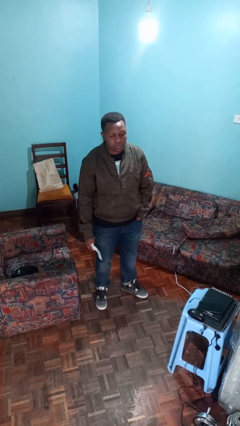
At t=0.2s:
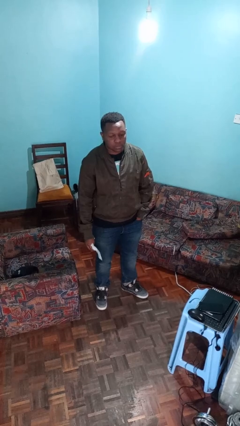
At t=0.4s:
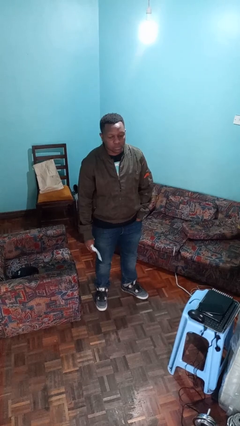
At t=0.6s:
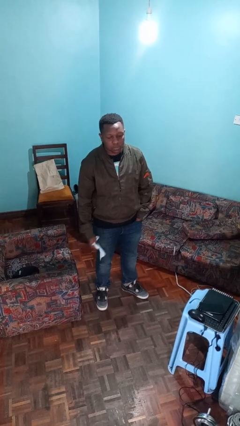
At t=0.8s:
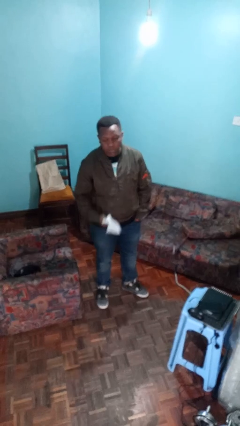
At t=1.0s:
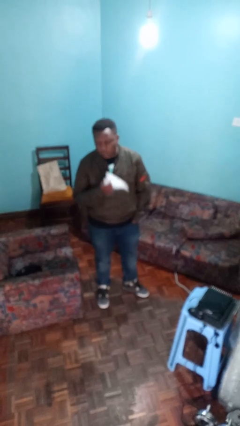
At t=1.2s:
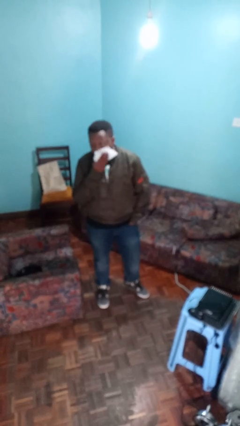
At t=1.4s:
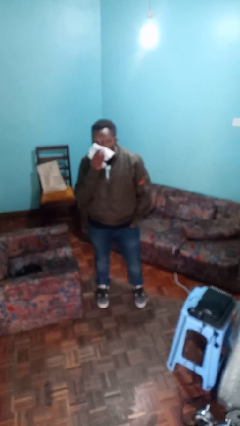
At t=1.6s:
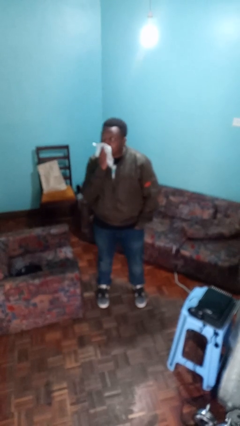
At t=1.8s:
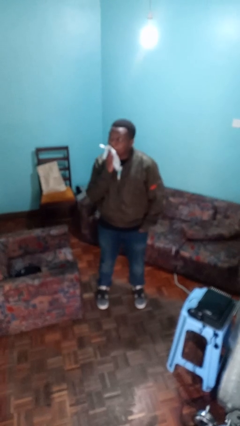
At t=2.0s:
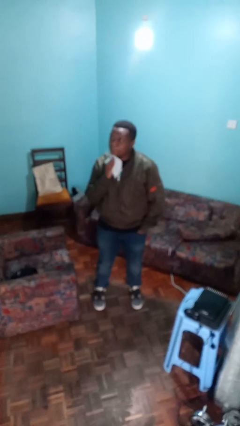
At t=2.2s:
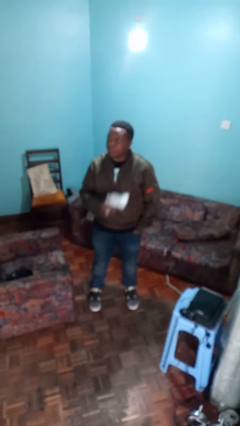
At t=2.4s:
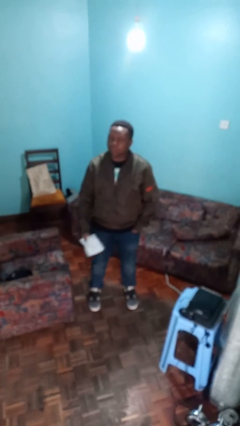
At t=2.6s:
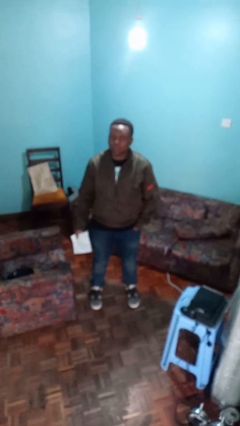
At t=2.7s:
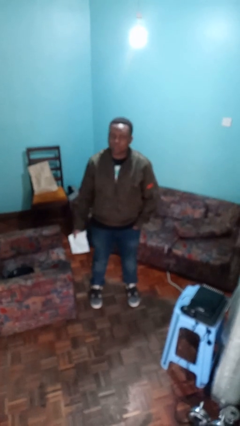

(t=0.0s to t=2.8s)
person wipes mouth with napkin

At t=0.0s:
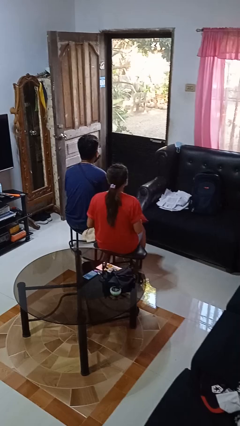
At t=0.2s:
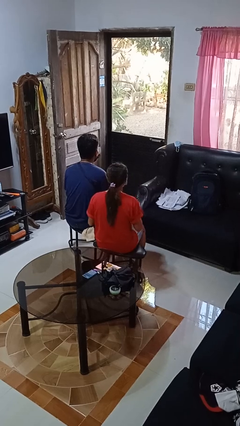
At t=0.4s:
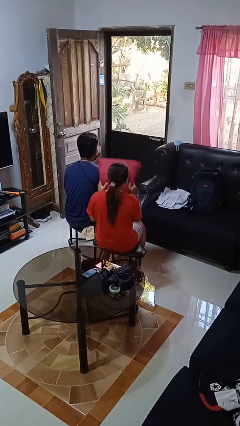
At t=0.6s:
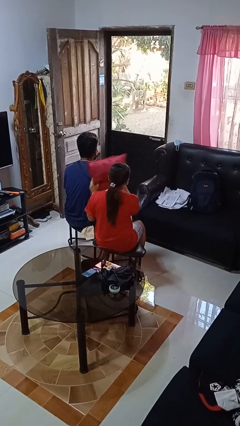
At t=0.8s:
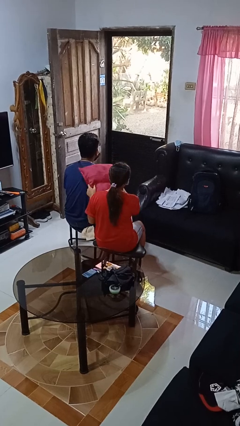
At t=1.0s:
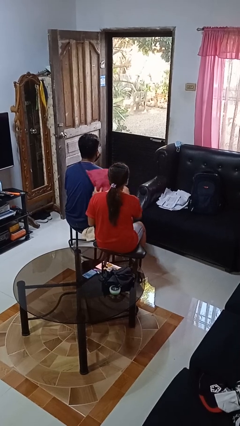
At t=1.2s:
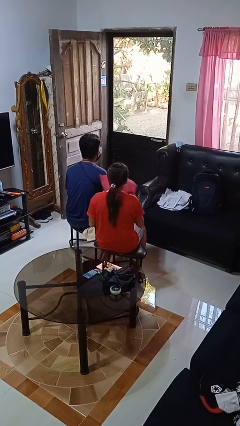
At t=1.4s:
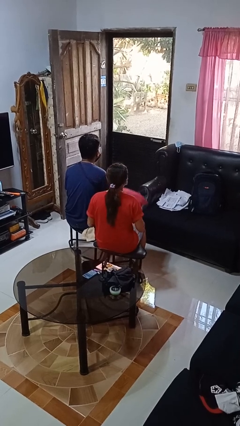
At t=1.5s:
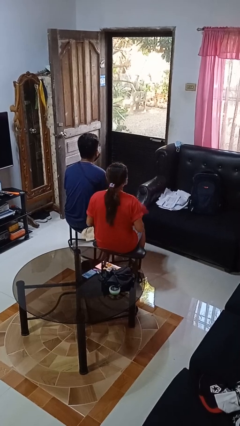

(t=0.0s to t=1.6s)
person hits person with pillow

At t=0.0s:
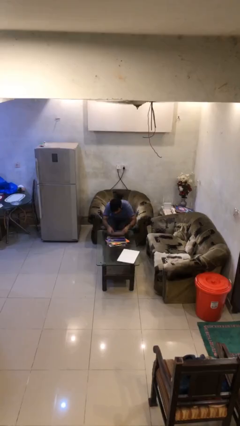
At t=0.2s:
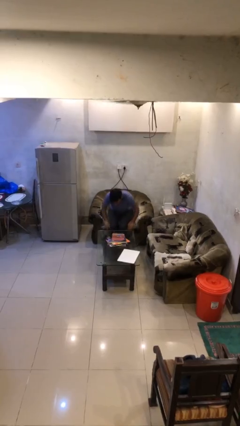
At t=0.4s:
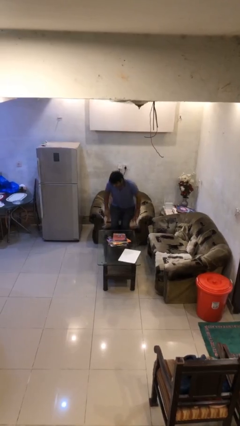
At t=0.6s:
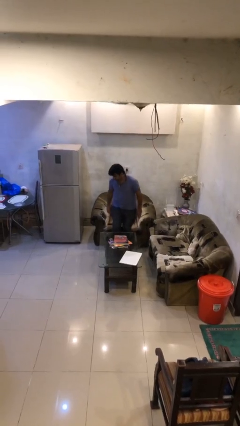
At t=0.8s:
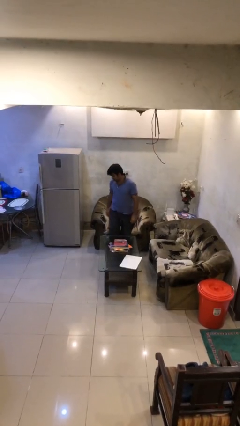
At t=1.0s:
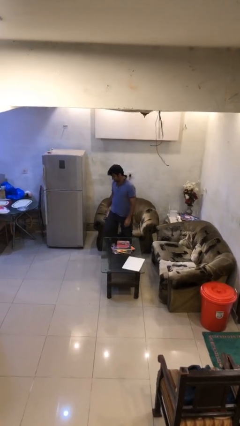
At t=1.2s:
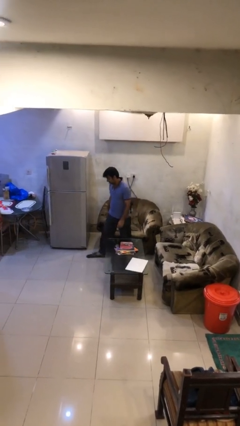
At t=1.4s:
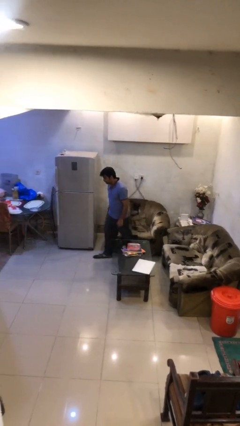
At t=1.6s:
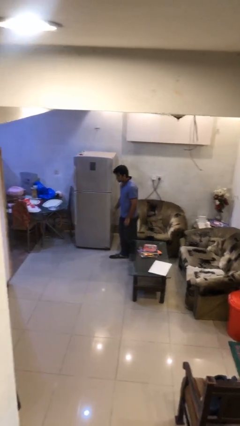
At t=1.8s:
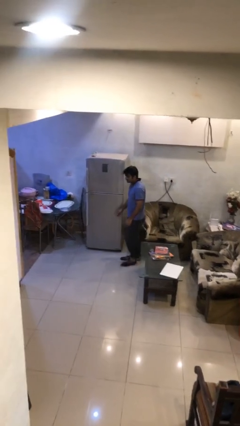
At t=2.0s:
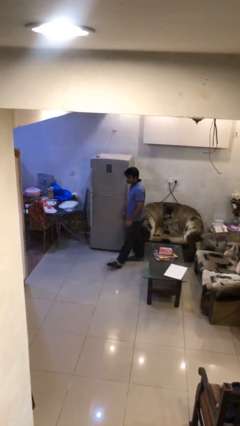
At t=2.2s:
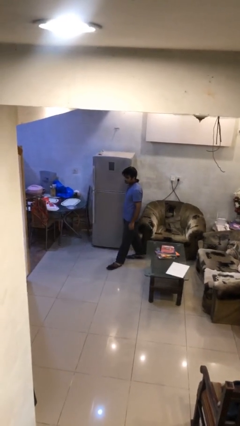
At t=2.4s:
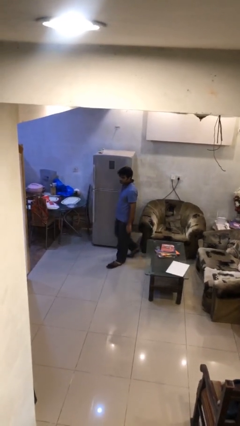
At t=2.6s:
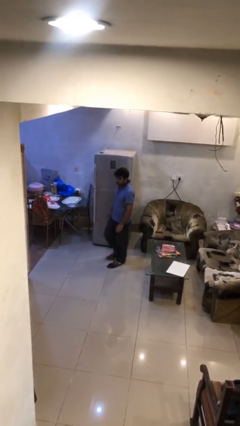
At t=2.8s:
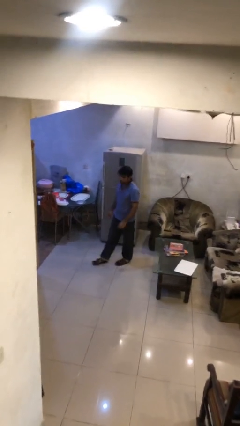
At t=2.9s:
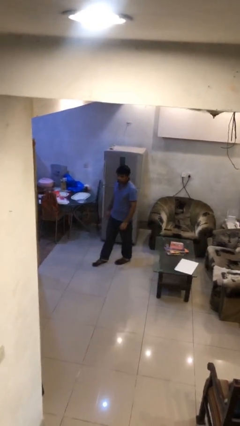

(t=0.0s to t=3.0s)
person stands up

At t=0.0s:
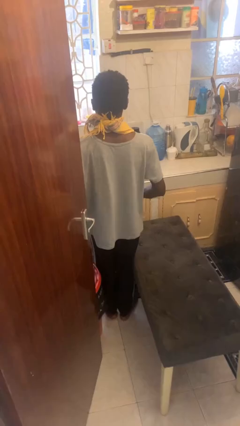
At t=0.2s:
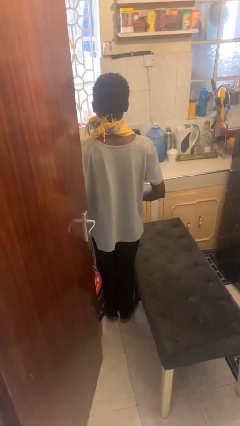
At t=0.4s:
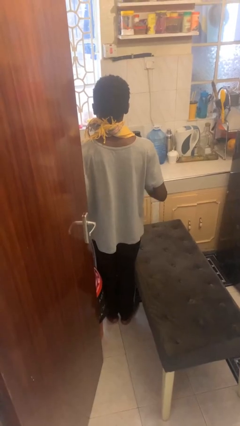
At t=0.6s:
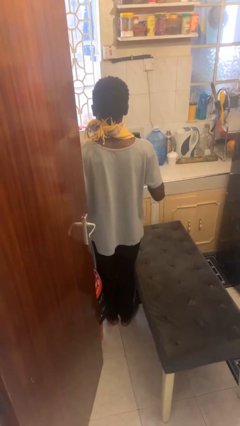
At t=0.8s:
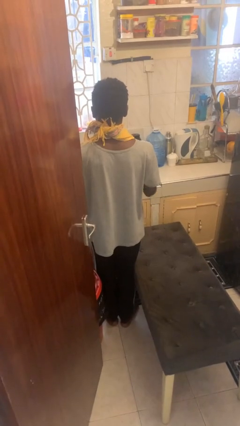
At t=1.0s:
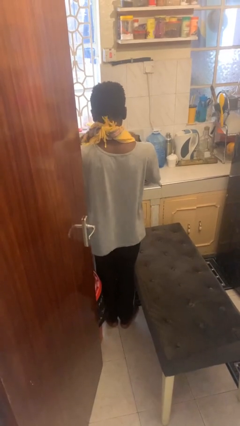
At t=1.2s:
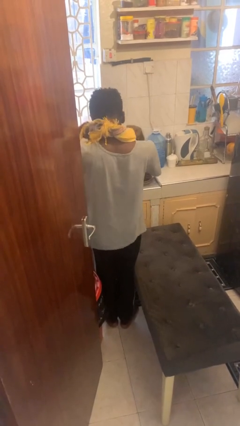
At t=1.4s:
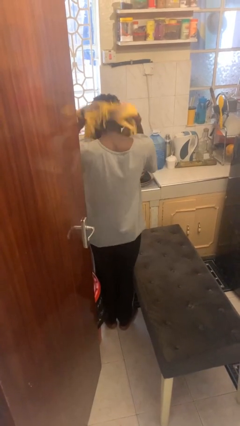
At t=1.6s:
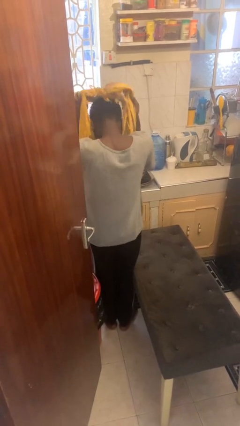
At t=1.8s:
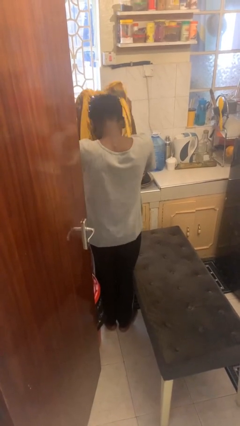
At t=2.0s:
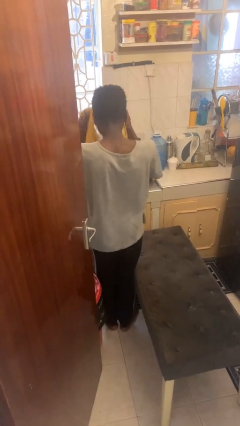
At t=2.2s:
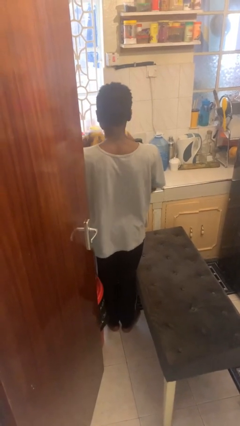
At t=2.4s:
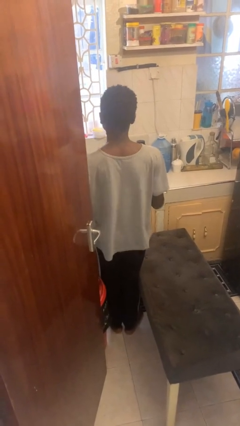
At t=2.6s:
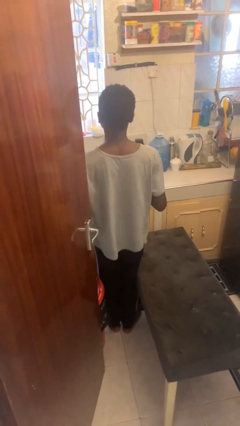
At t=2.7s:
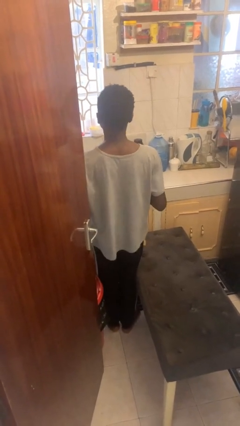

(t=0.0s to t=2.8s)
person takes off apron

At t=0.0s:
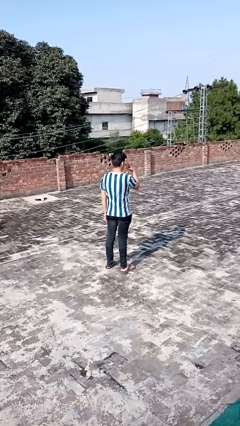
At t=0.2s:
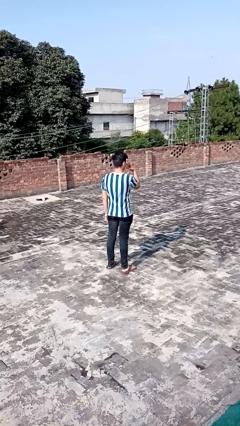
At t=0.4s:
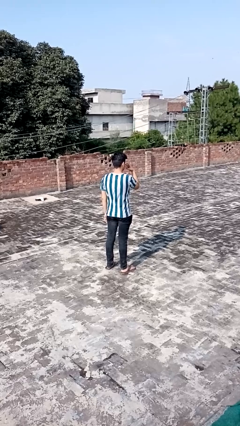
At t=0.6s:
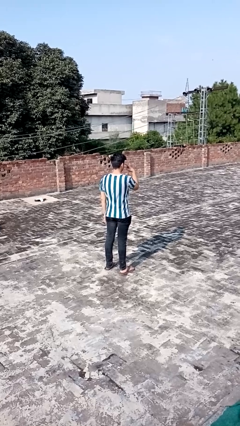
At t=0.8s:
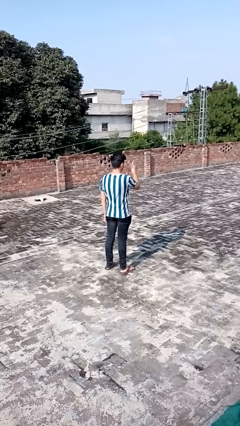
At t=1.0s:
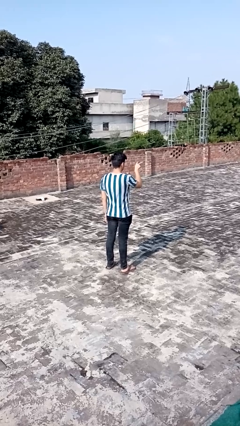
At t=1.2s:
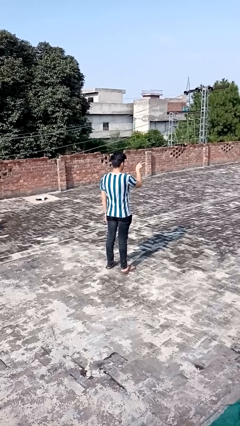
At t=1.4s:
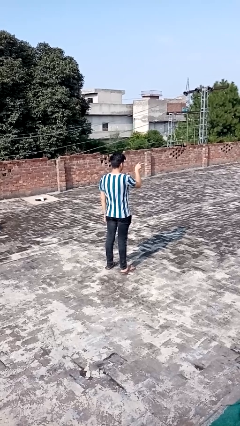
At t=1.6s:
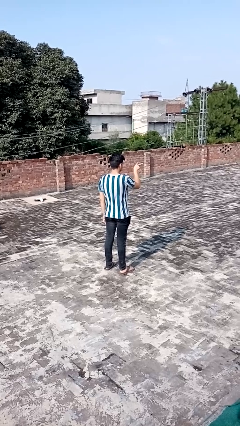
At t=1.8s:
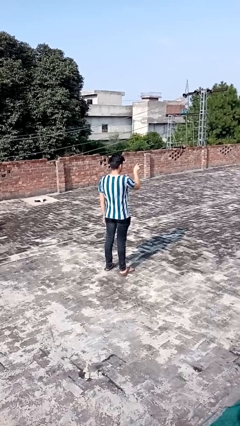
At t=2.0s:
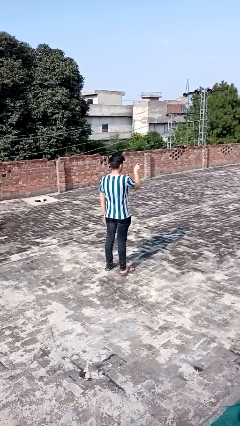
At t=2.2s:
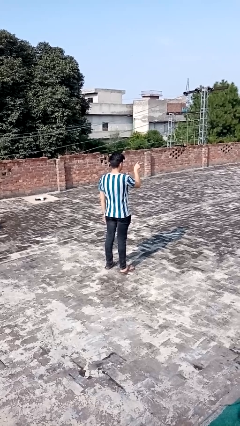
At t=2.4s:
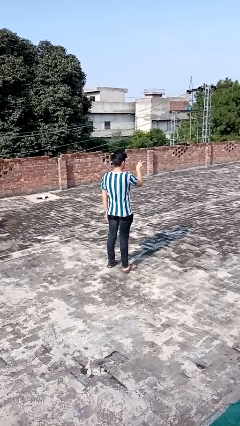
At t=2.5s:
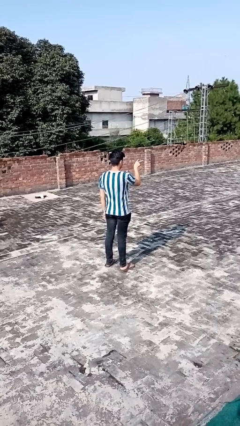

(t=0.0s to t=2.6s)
person gestures watch closely

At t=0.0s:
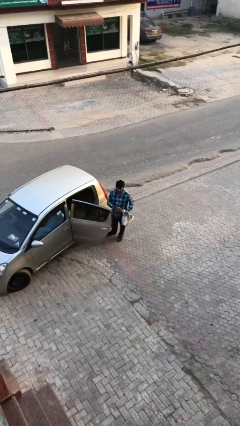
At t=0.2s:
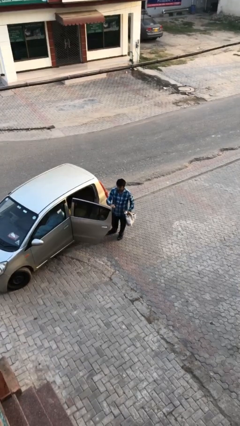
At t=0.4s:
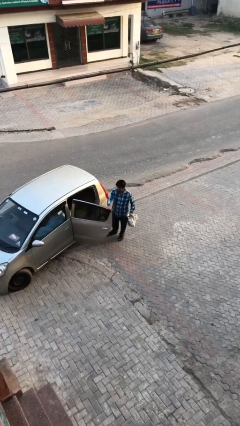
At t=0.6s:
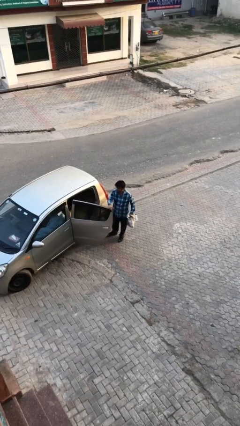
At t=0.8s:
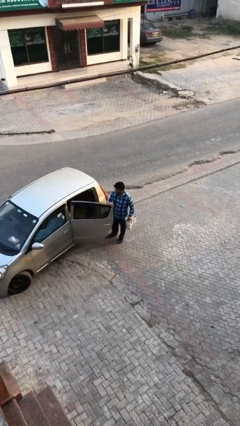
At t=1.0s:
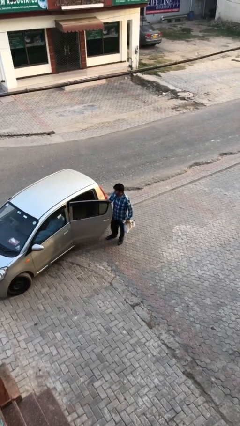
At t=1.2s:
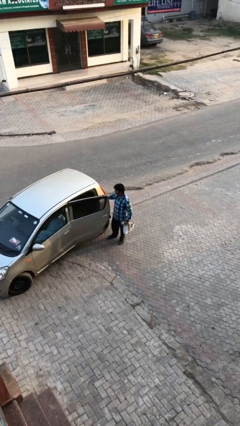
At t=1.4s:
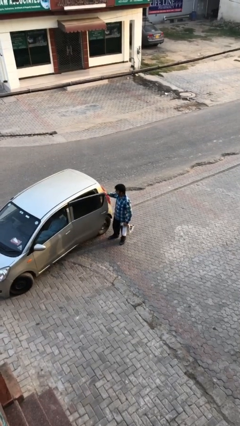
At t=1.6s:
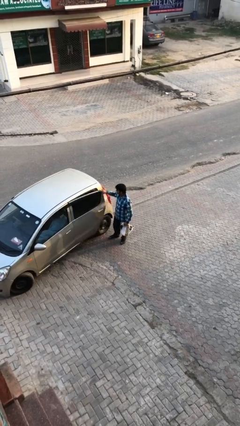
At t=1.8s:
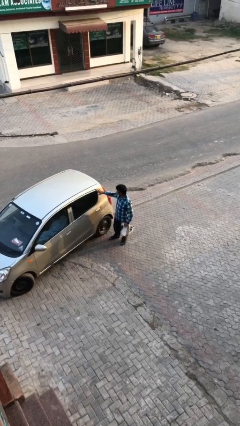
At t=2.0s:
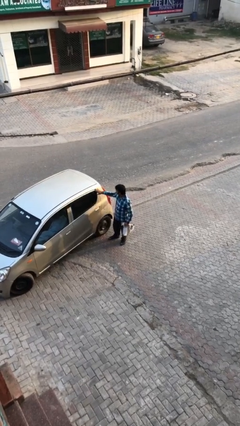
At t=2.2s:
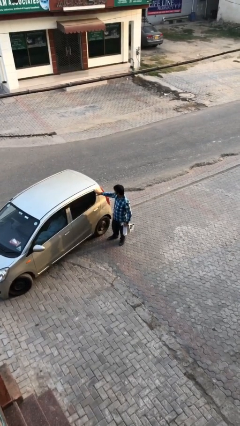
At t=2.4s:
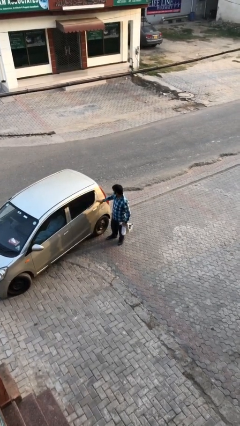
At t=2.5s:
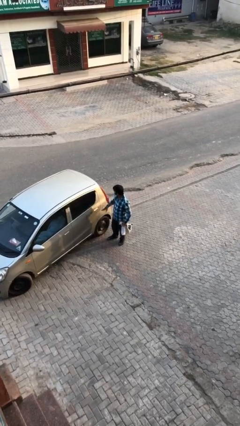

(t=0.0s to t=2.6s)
person closes car door

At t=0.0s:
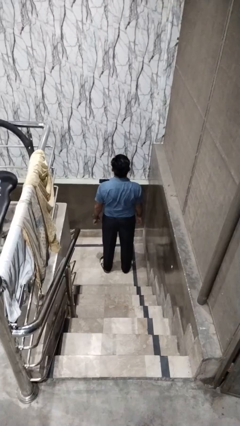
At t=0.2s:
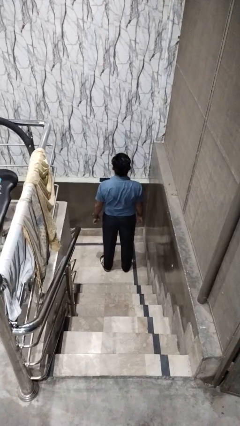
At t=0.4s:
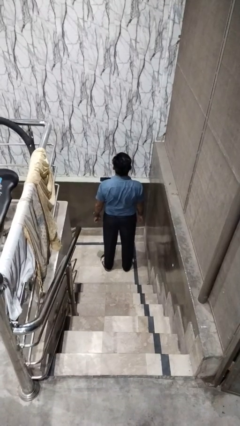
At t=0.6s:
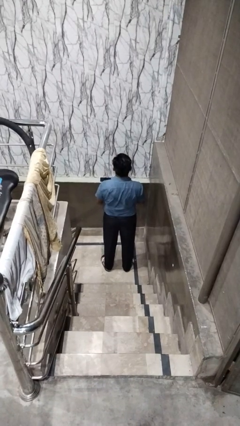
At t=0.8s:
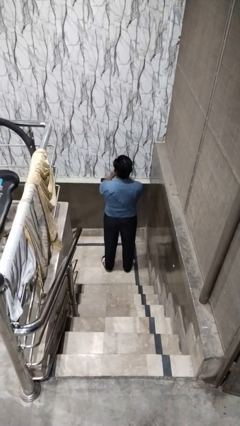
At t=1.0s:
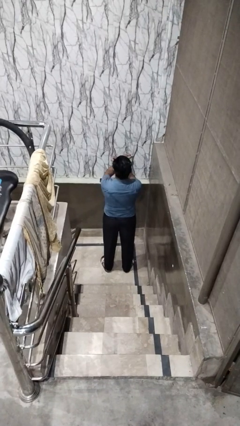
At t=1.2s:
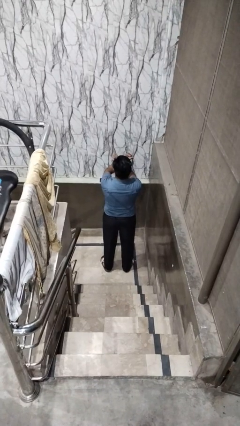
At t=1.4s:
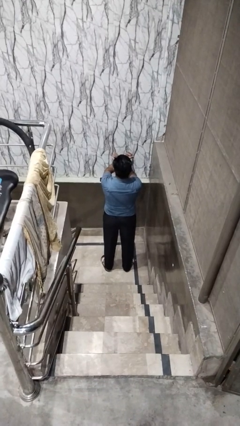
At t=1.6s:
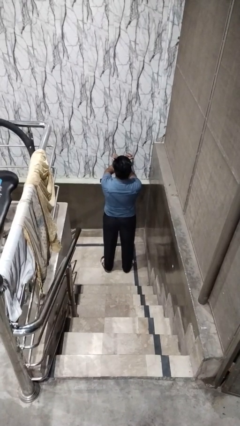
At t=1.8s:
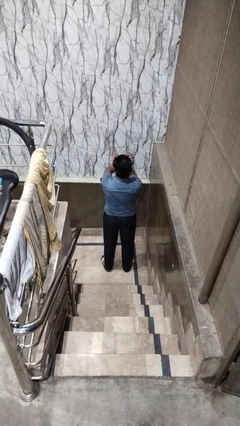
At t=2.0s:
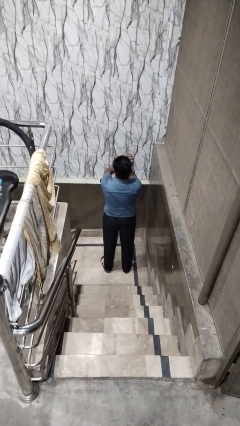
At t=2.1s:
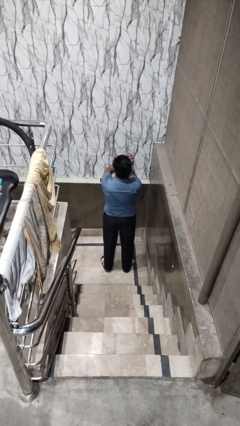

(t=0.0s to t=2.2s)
person gestures arms x
